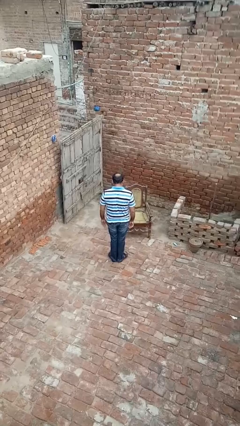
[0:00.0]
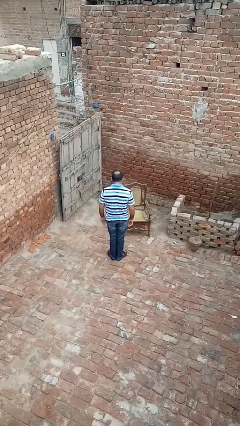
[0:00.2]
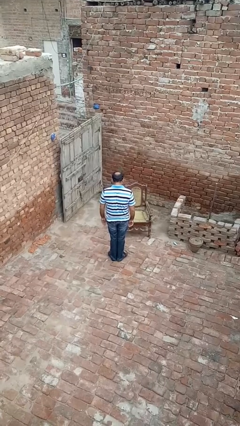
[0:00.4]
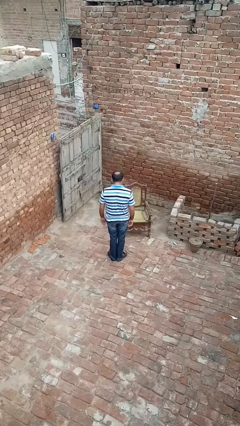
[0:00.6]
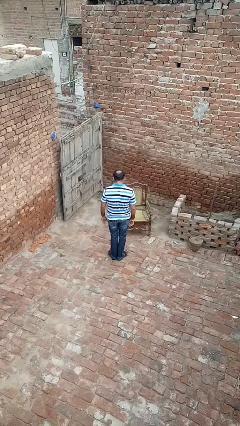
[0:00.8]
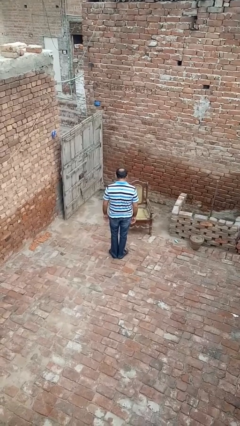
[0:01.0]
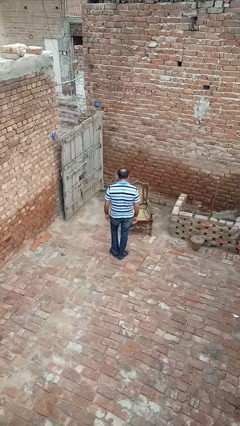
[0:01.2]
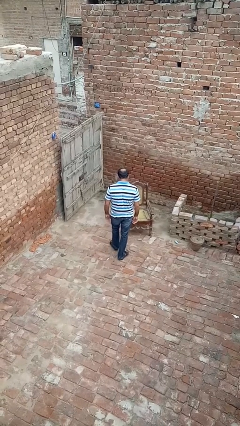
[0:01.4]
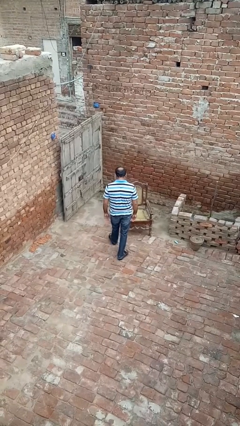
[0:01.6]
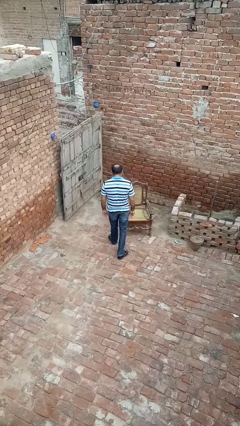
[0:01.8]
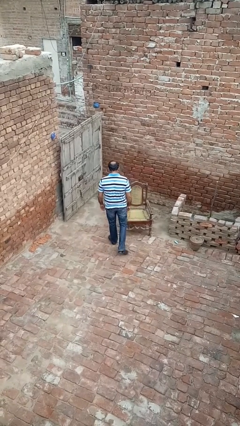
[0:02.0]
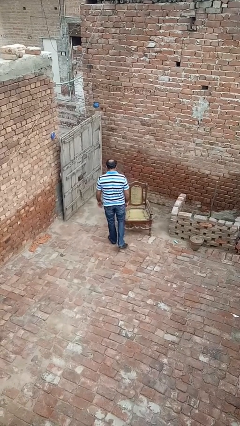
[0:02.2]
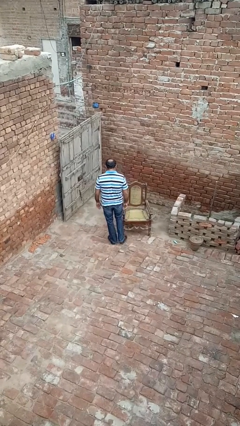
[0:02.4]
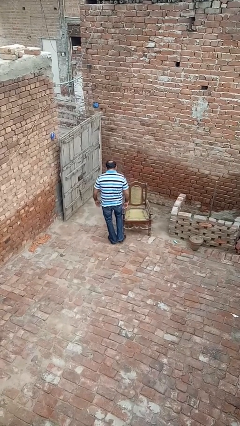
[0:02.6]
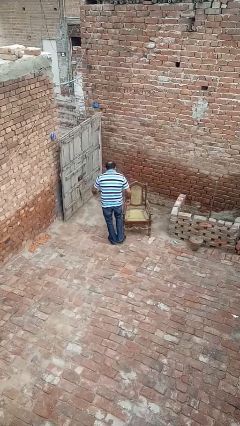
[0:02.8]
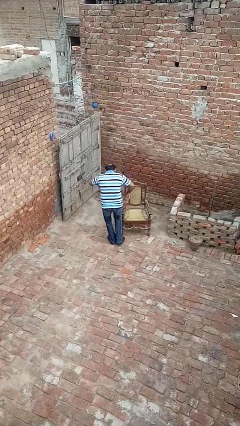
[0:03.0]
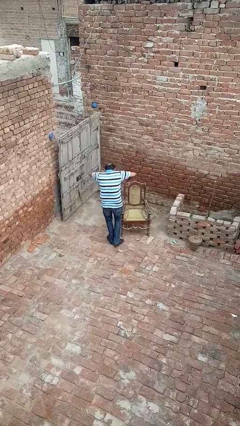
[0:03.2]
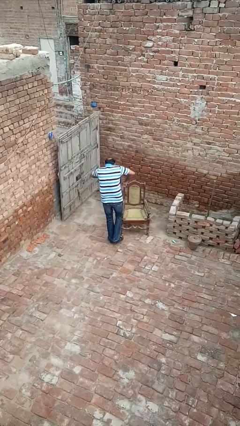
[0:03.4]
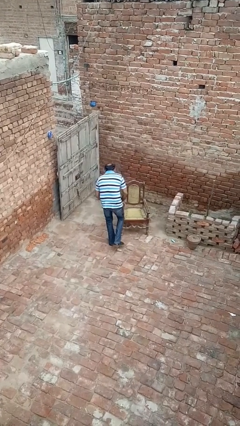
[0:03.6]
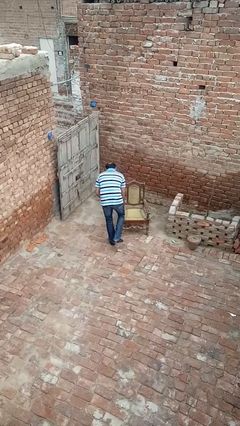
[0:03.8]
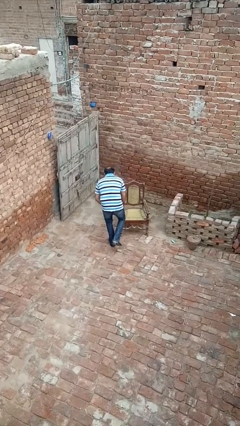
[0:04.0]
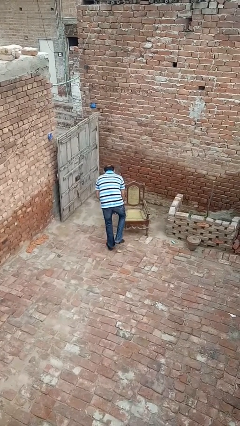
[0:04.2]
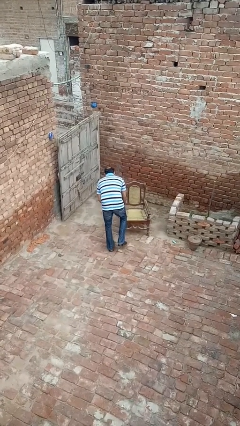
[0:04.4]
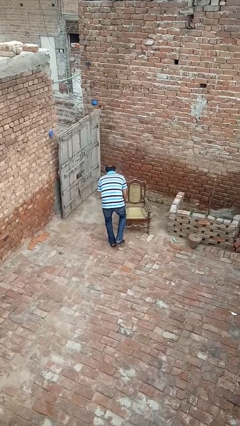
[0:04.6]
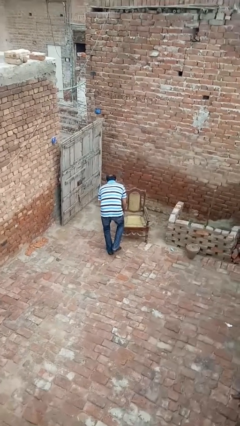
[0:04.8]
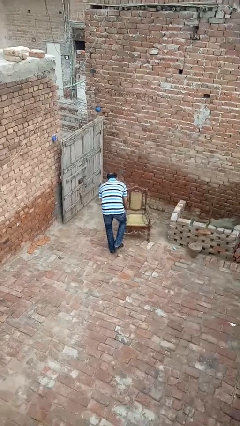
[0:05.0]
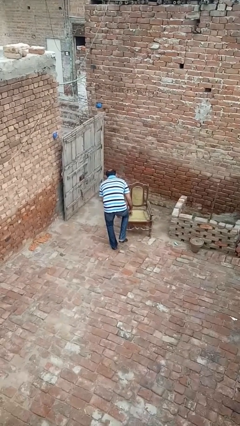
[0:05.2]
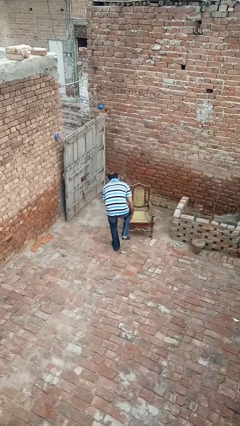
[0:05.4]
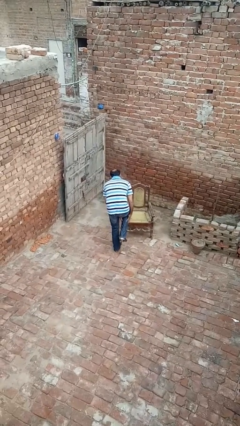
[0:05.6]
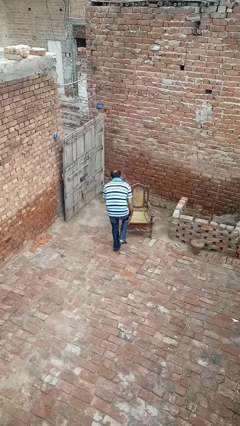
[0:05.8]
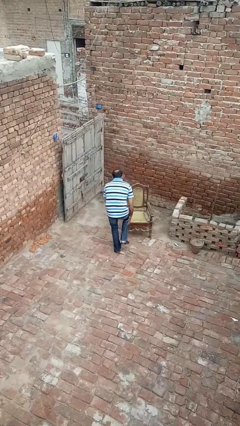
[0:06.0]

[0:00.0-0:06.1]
person stubs toe

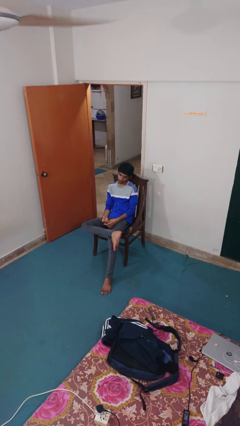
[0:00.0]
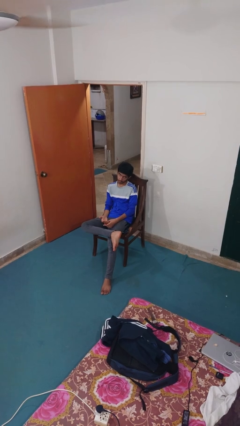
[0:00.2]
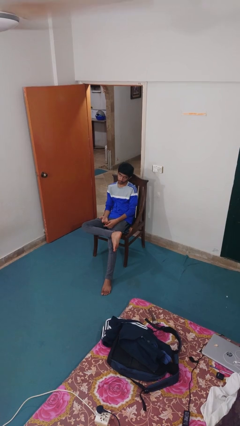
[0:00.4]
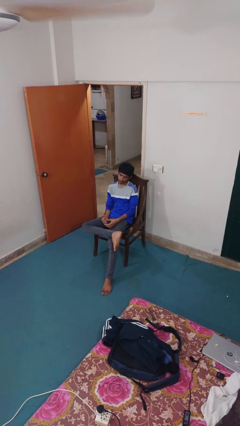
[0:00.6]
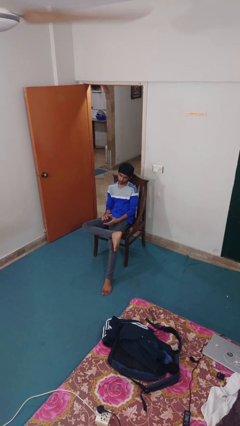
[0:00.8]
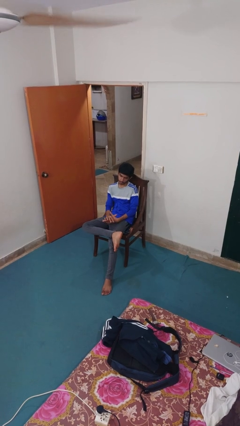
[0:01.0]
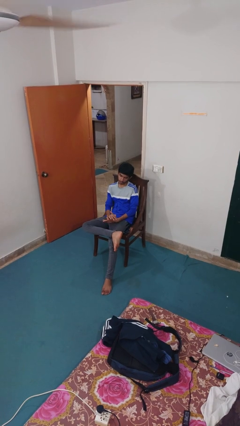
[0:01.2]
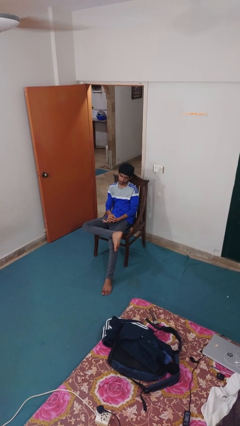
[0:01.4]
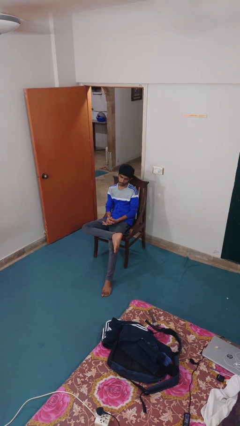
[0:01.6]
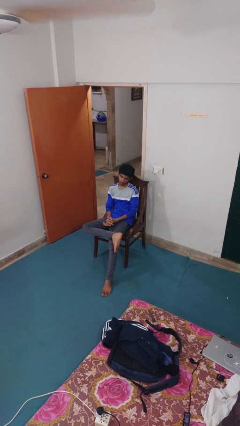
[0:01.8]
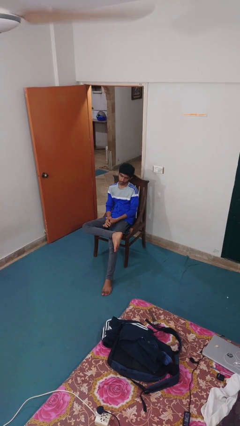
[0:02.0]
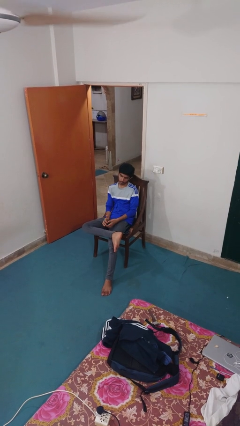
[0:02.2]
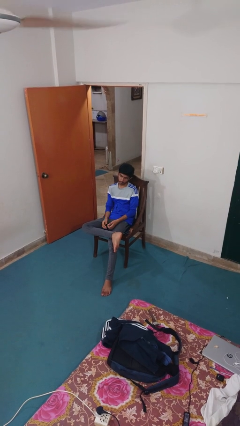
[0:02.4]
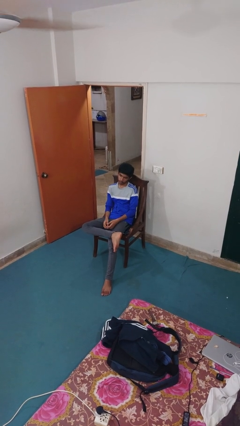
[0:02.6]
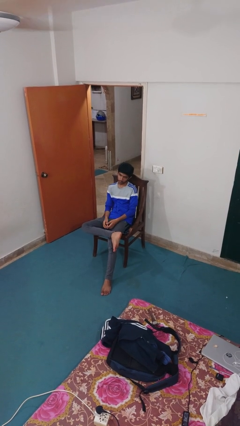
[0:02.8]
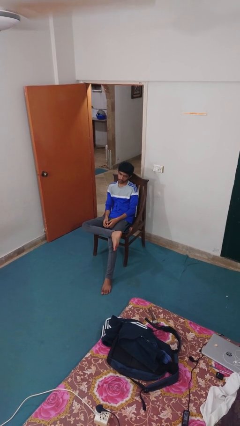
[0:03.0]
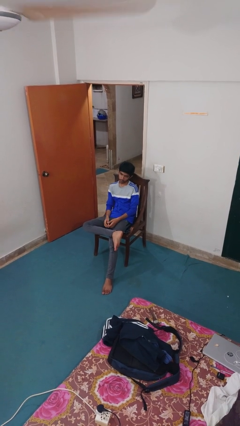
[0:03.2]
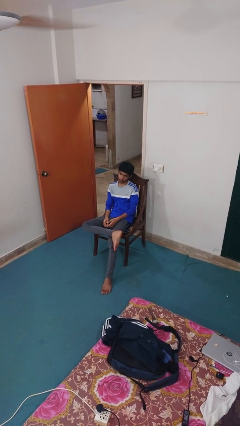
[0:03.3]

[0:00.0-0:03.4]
person snaps fingers

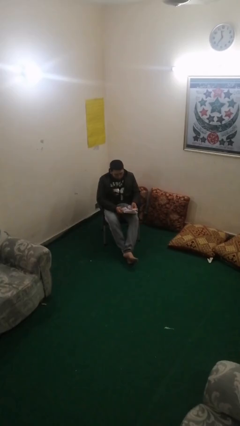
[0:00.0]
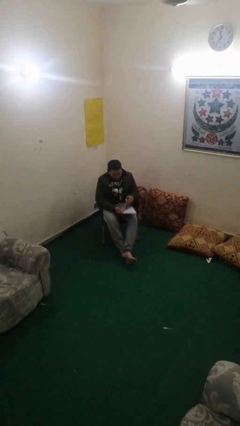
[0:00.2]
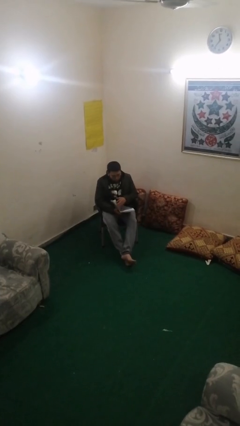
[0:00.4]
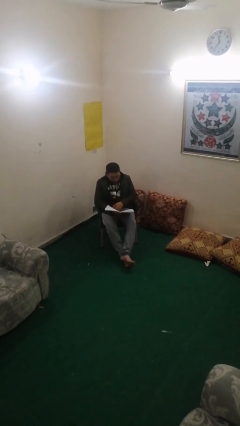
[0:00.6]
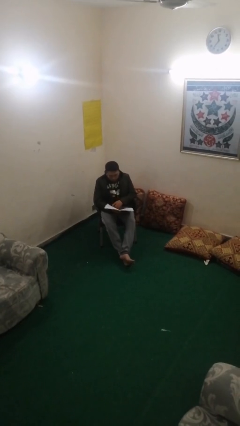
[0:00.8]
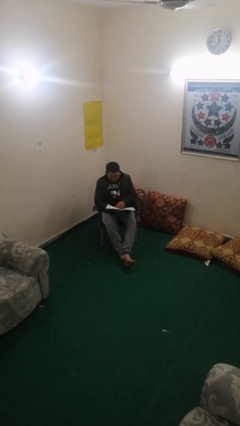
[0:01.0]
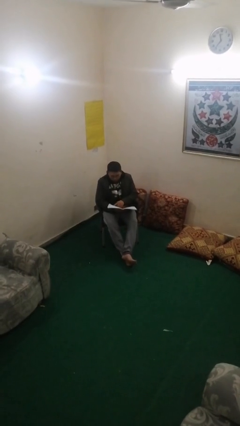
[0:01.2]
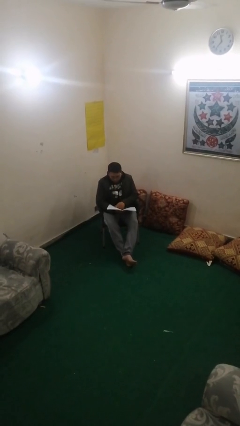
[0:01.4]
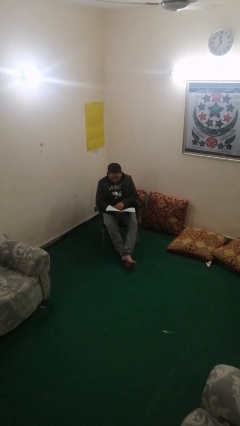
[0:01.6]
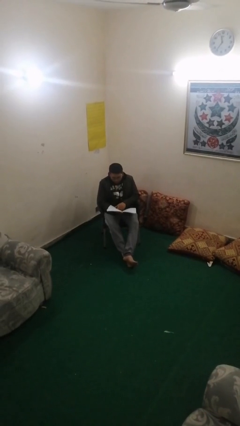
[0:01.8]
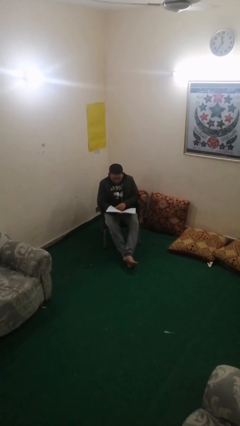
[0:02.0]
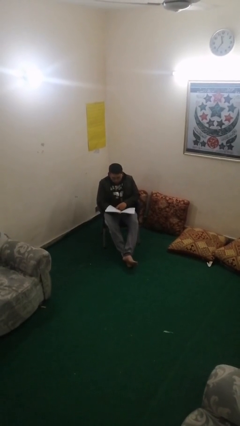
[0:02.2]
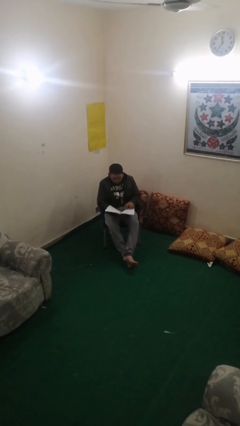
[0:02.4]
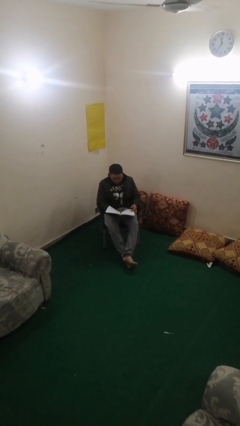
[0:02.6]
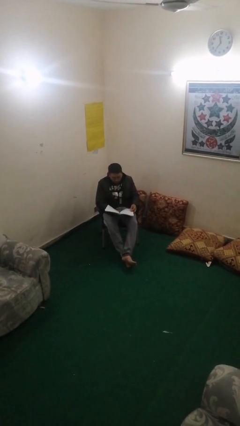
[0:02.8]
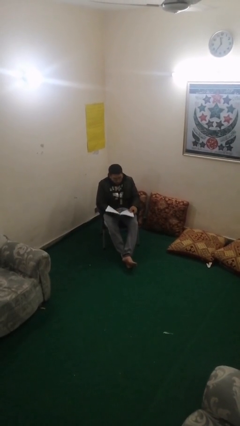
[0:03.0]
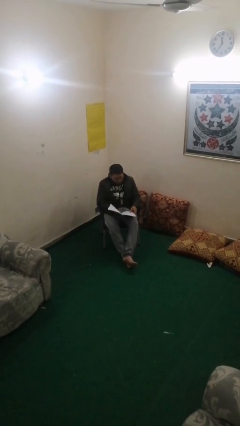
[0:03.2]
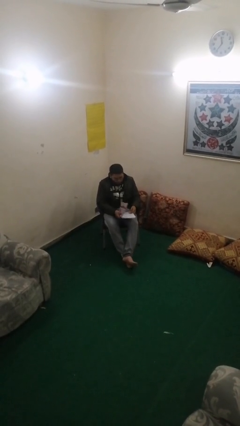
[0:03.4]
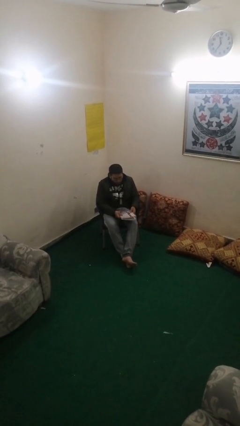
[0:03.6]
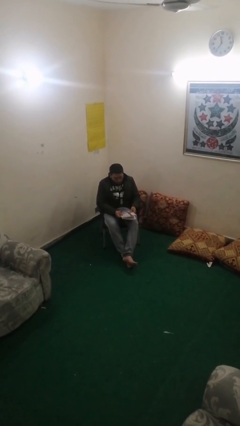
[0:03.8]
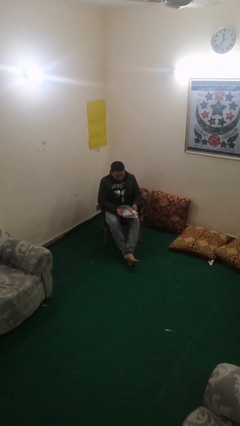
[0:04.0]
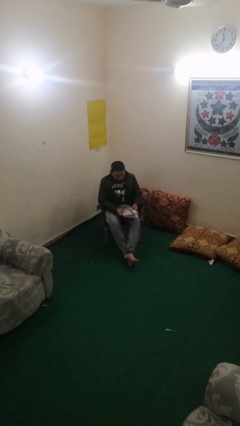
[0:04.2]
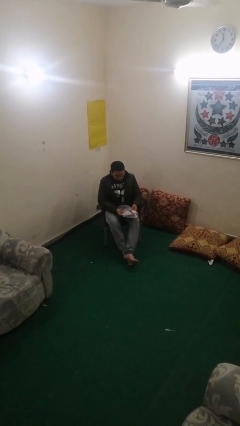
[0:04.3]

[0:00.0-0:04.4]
person reads document

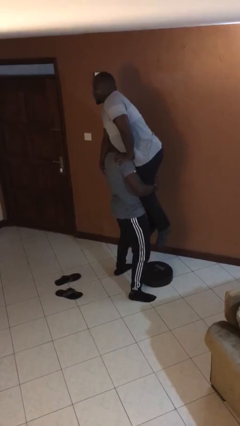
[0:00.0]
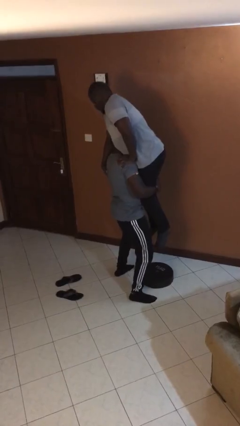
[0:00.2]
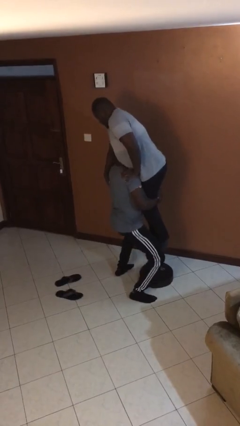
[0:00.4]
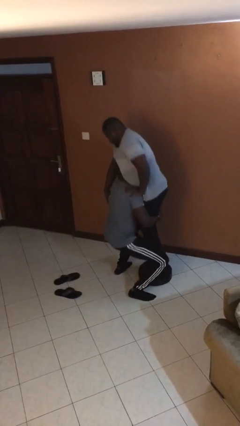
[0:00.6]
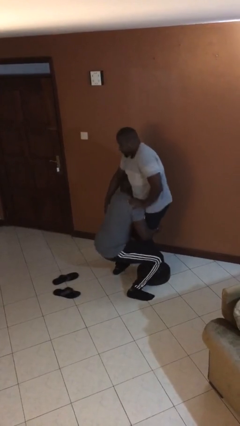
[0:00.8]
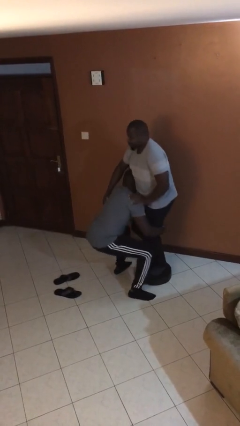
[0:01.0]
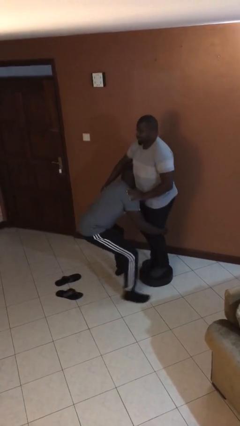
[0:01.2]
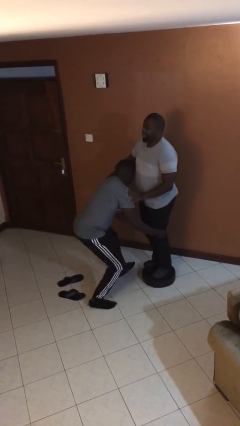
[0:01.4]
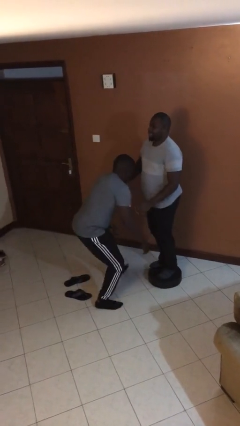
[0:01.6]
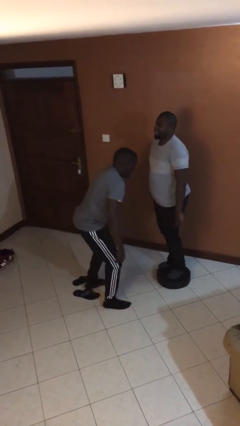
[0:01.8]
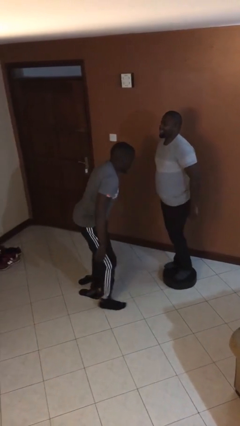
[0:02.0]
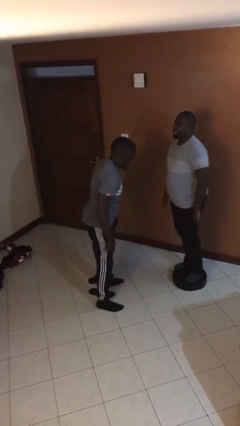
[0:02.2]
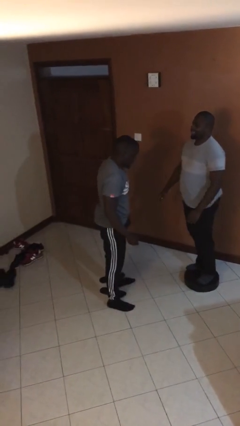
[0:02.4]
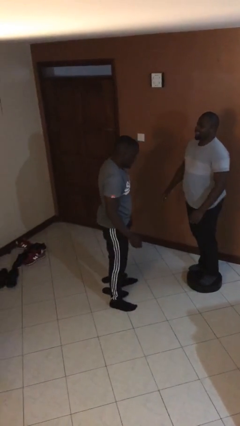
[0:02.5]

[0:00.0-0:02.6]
person puts down person

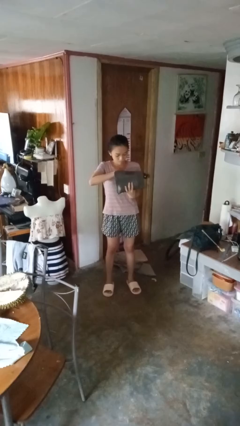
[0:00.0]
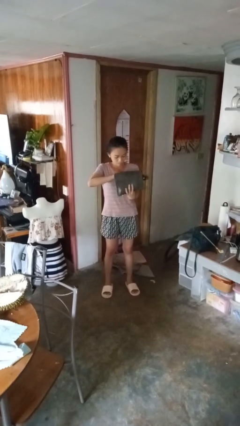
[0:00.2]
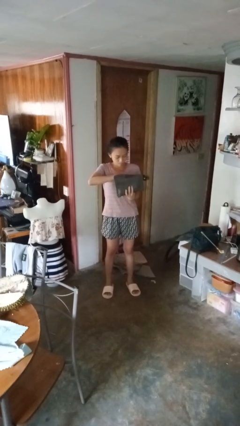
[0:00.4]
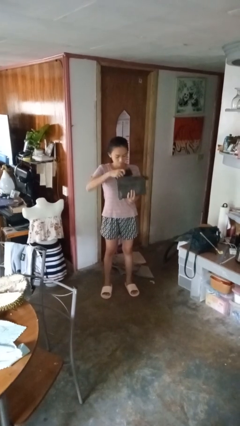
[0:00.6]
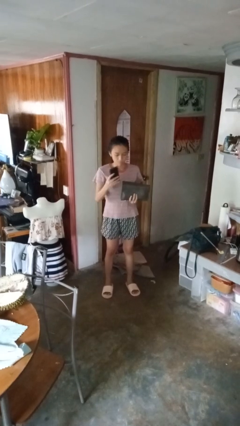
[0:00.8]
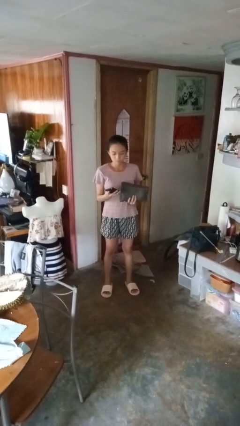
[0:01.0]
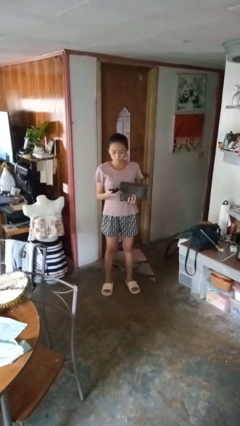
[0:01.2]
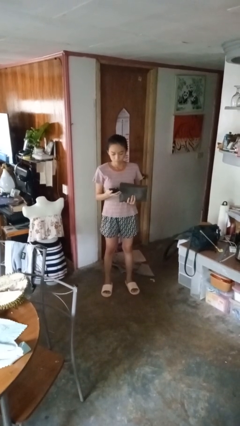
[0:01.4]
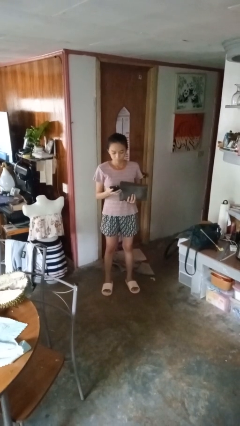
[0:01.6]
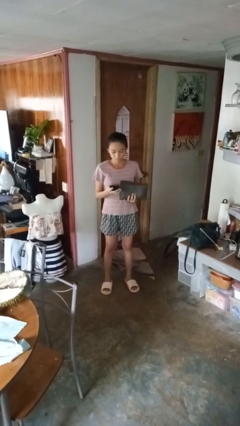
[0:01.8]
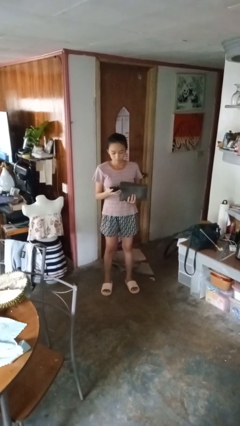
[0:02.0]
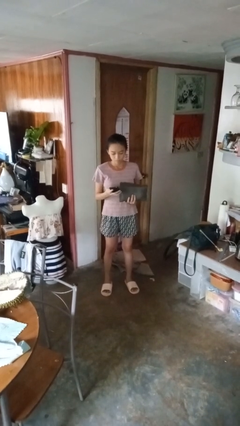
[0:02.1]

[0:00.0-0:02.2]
person takes object from purse
